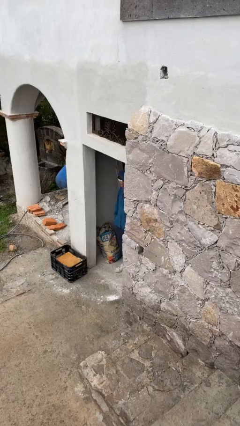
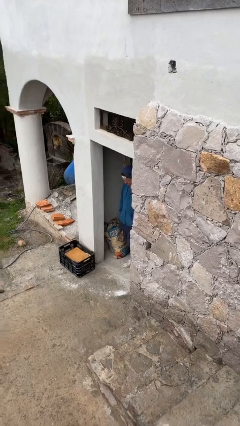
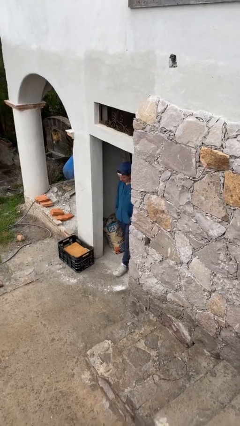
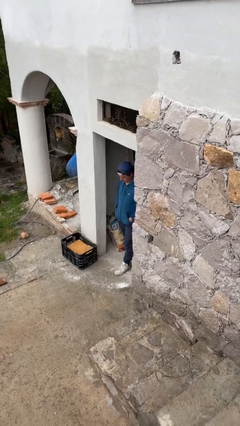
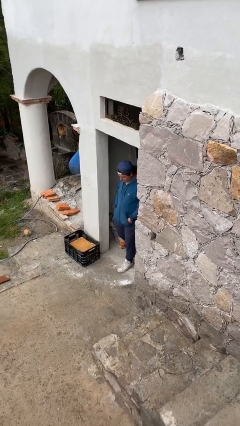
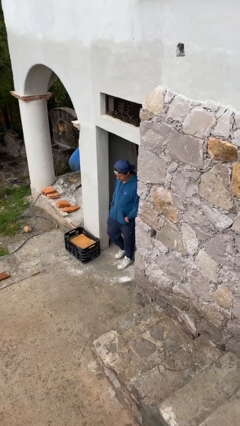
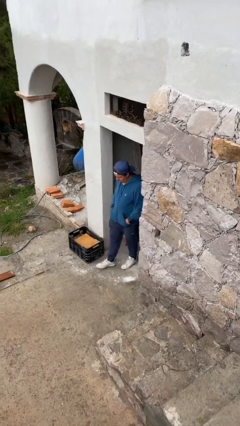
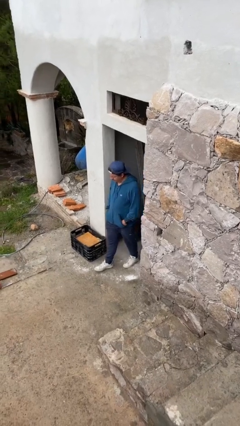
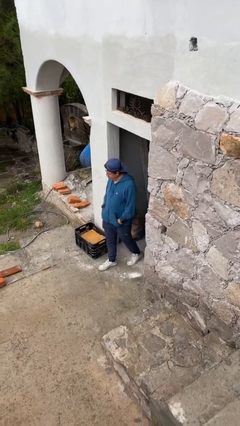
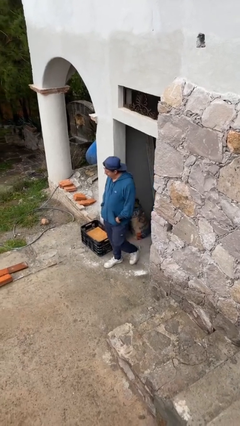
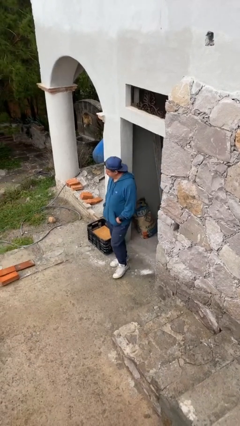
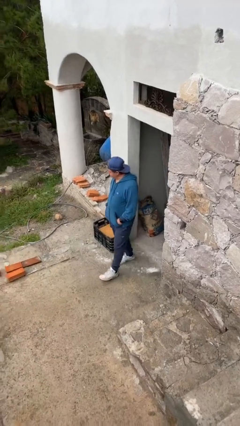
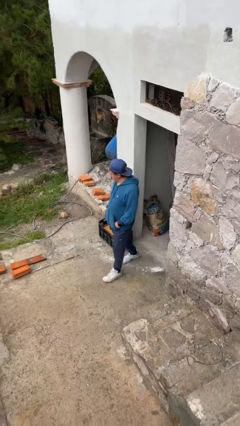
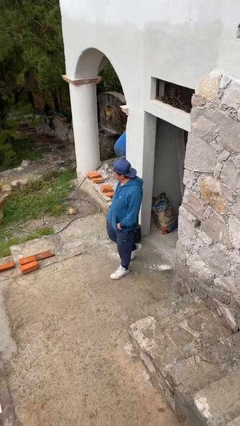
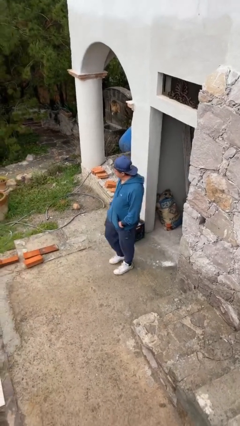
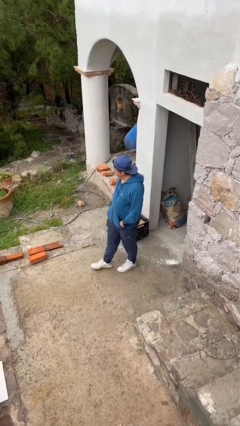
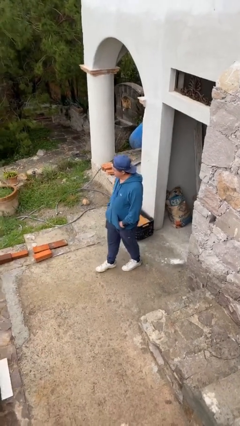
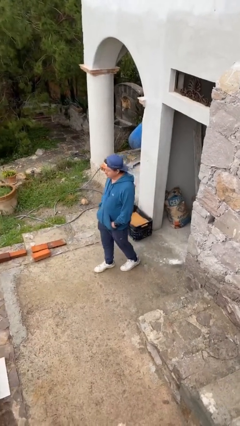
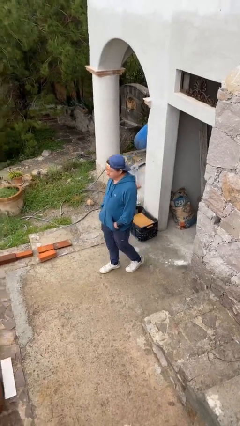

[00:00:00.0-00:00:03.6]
person enters scene through structure

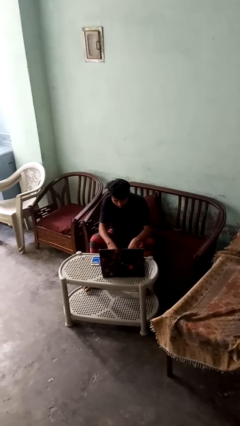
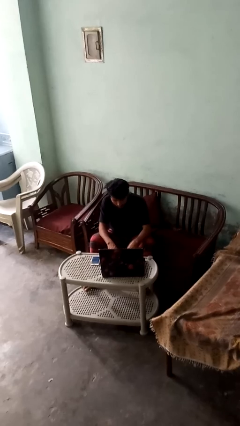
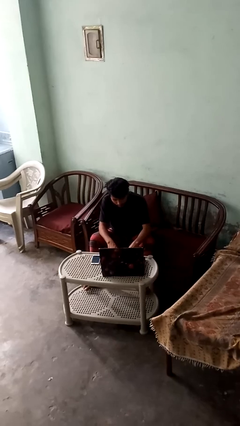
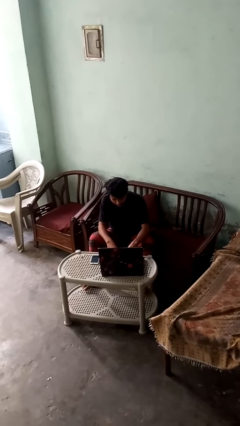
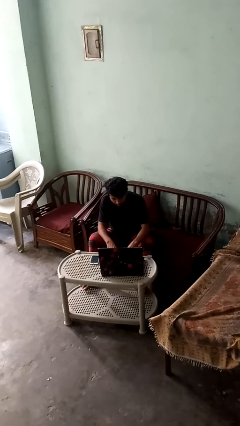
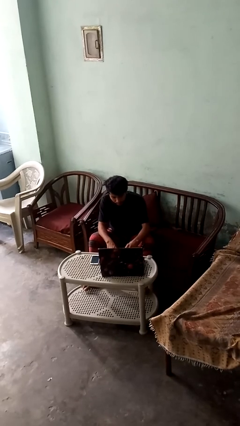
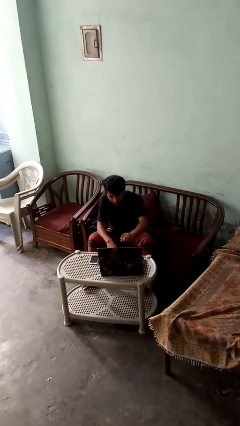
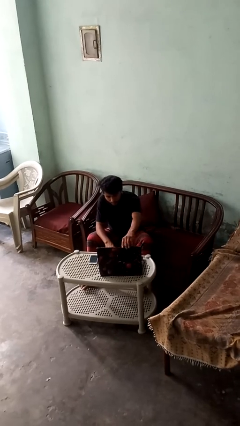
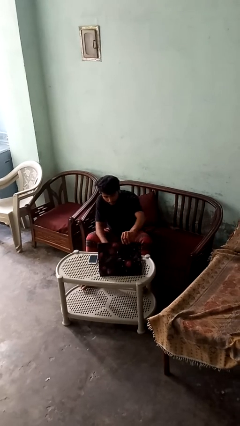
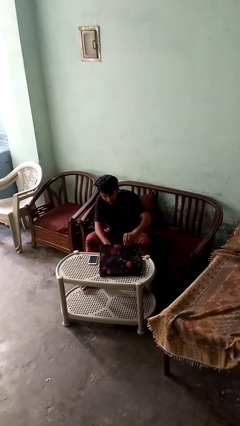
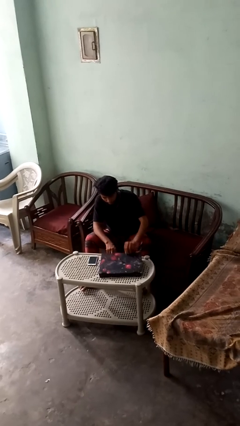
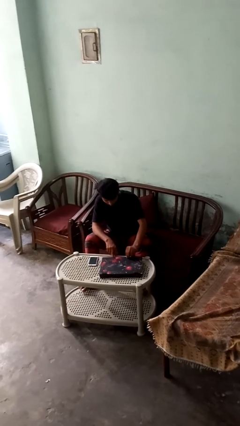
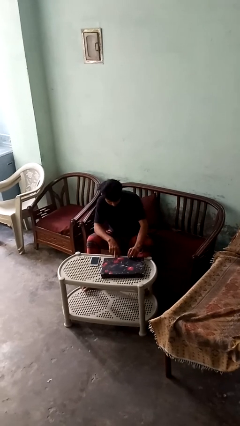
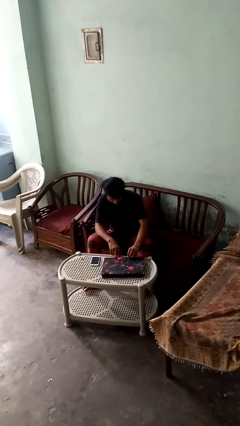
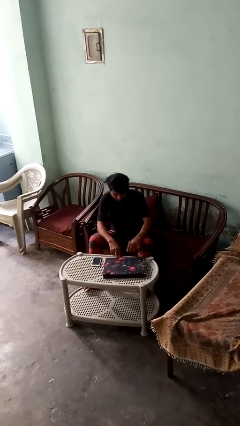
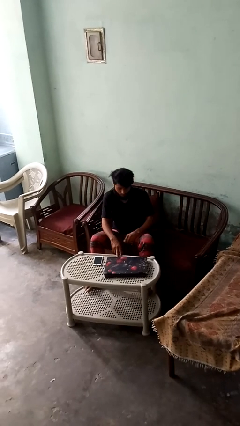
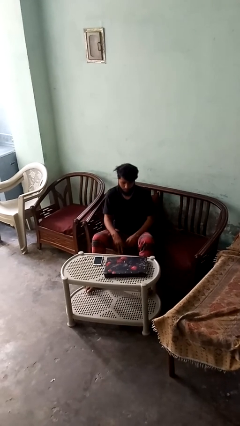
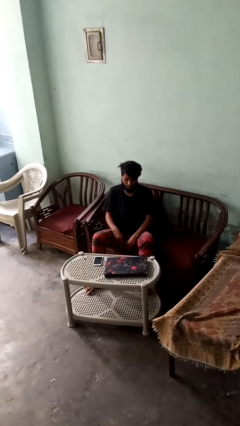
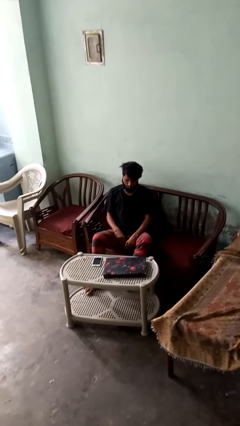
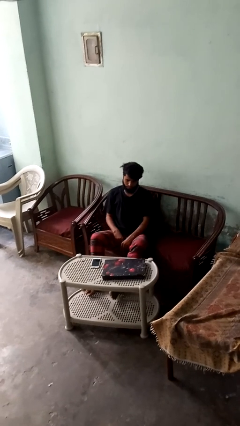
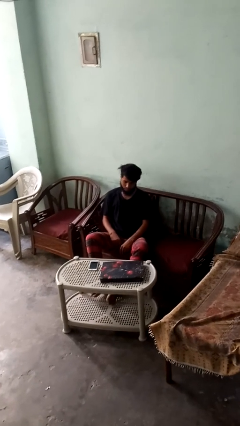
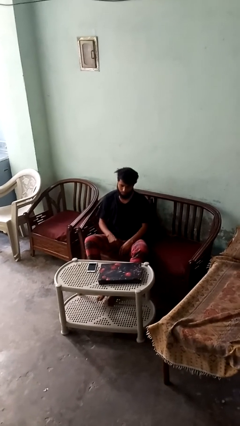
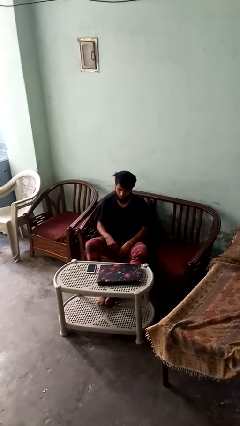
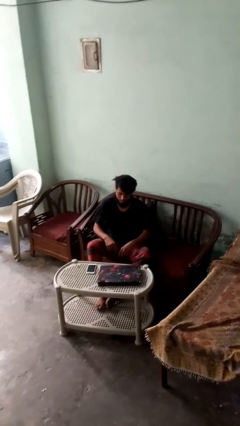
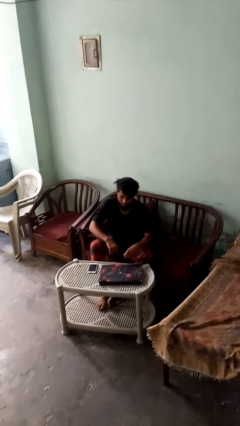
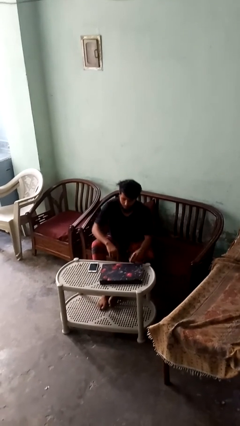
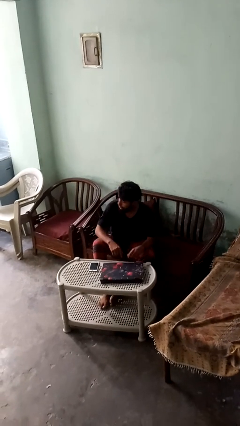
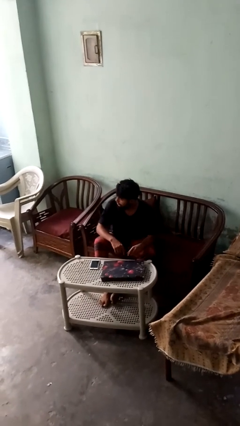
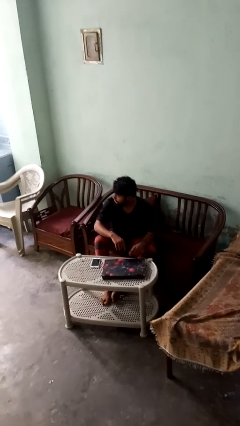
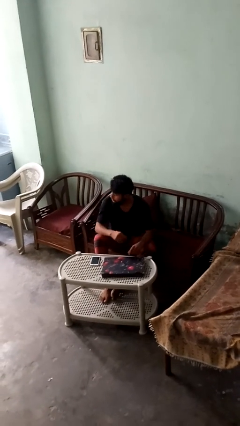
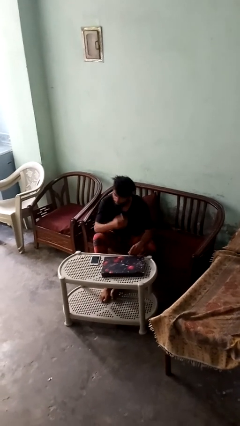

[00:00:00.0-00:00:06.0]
person closes laptop

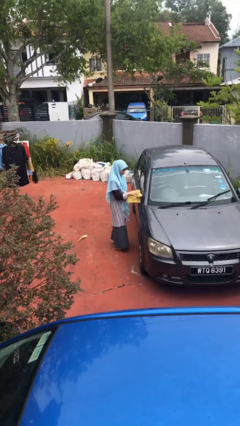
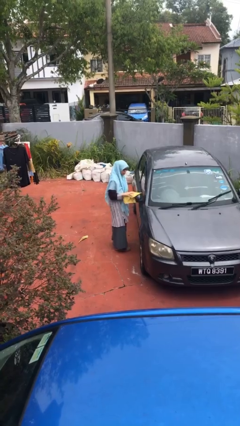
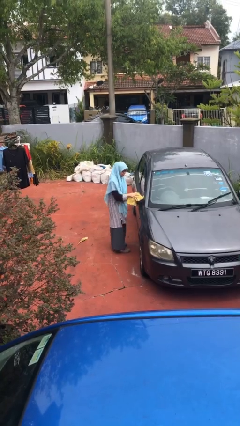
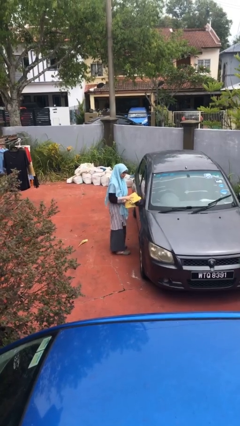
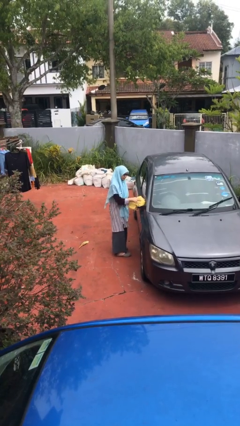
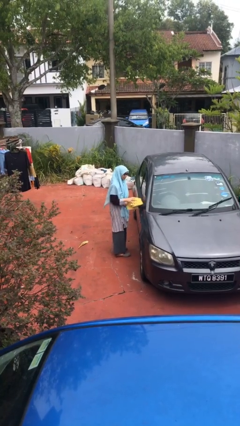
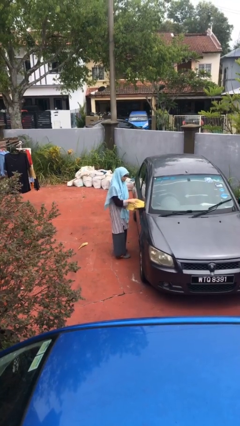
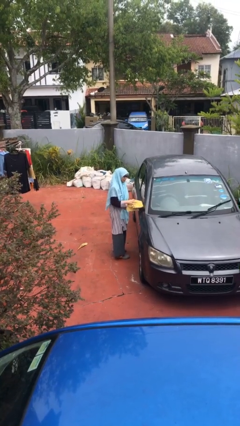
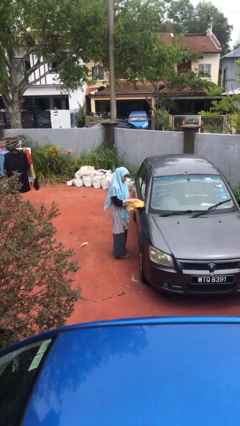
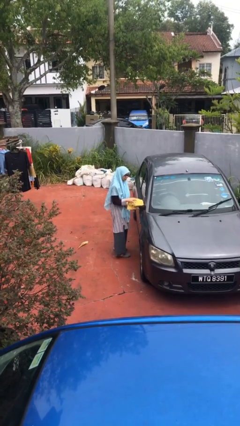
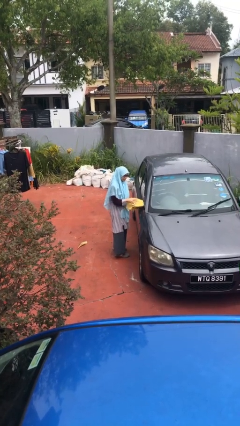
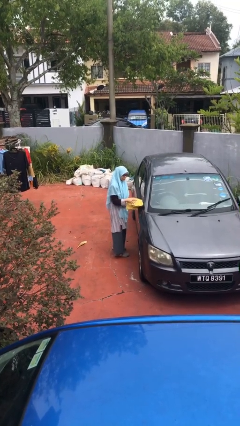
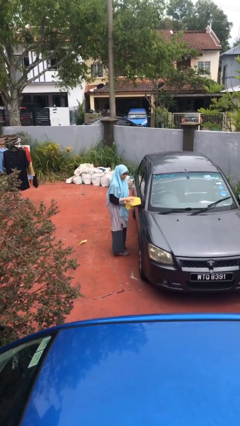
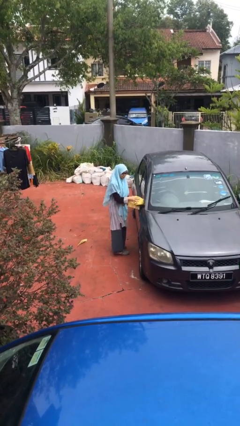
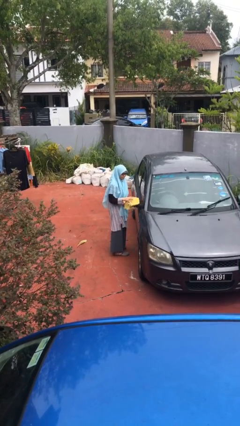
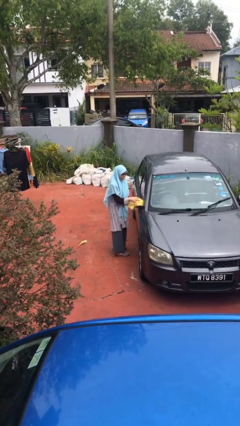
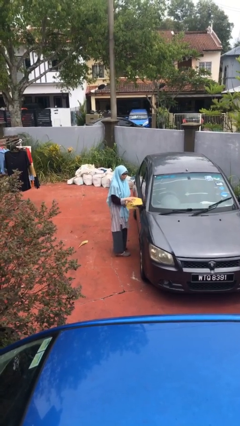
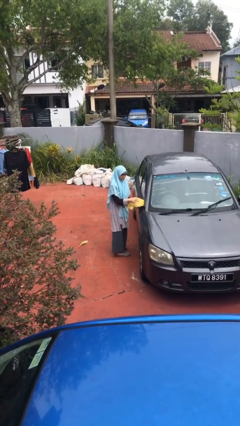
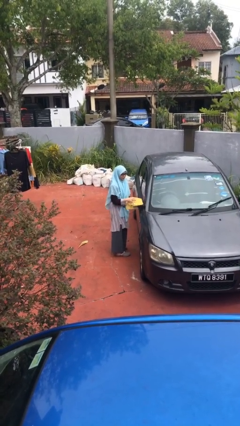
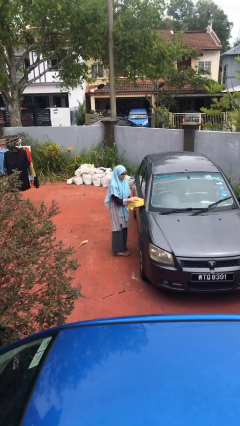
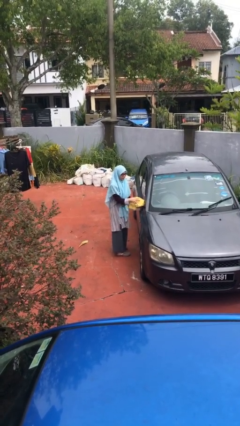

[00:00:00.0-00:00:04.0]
person polishes car with rag

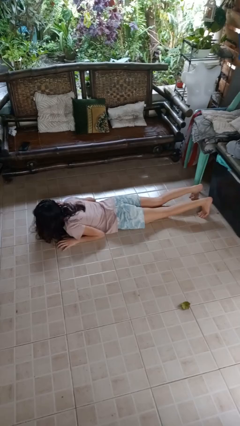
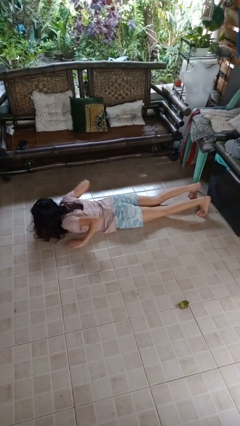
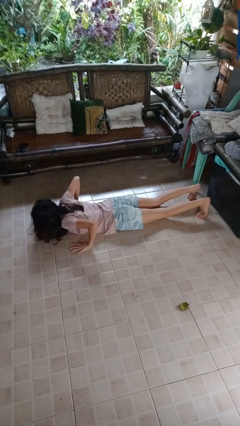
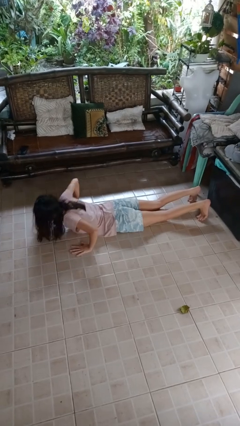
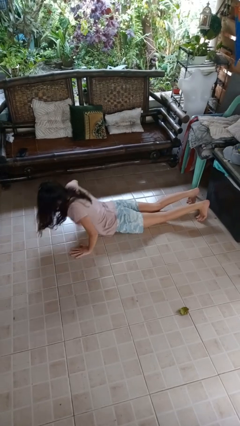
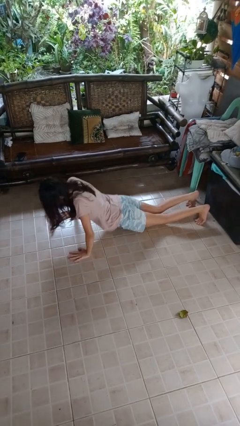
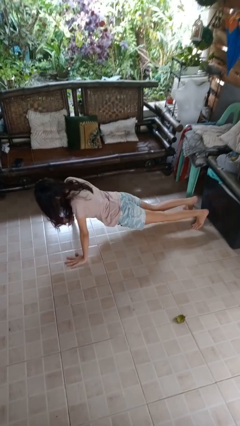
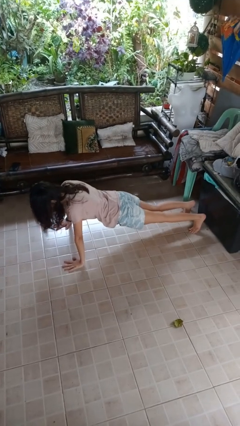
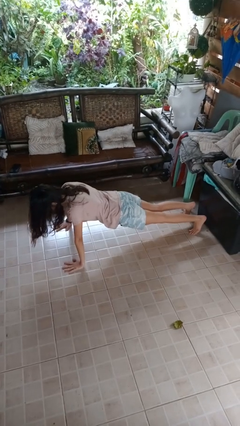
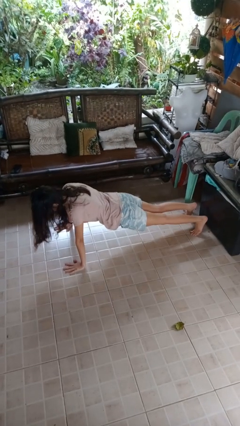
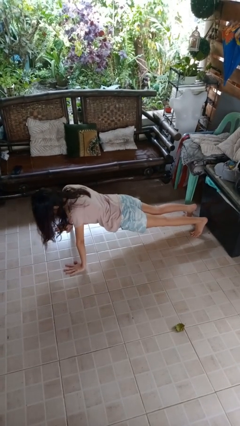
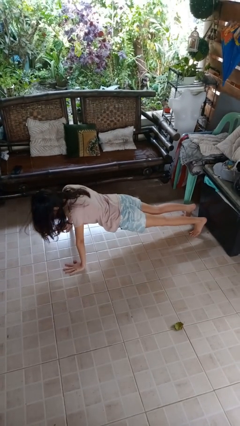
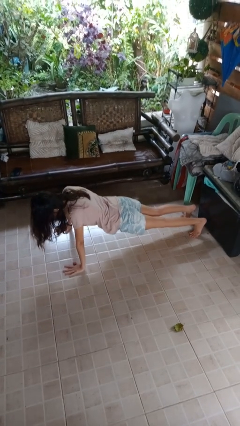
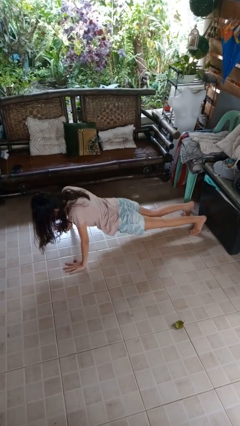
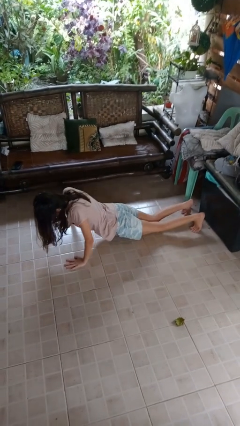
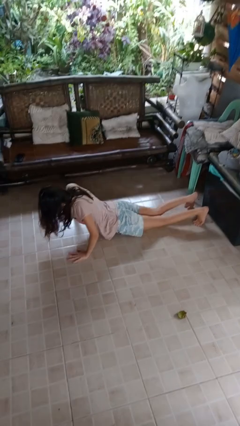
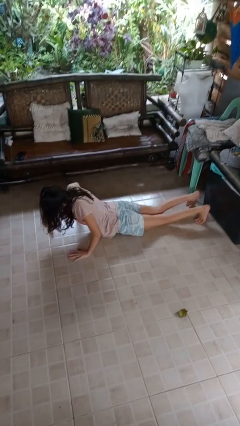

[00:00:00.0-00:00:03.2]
person exercises with pushup

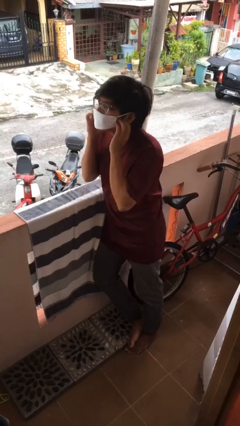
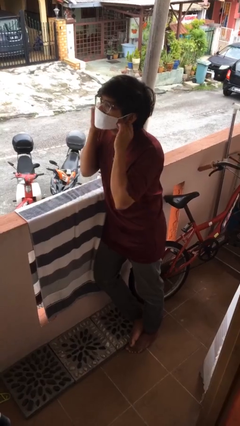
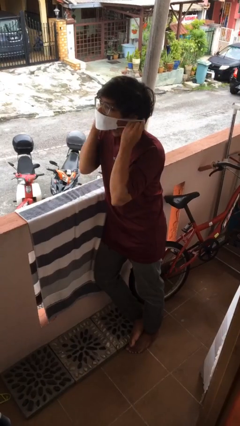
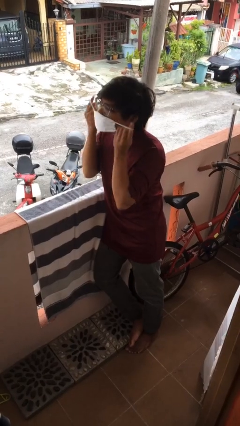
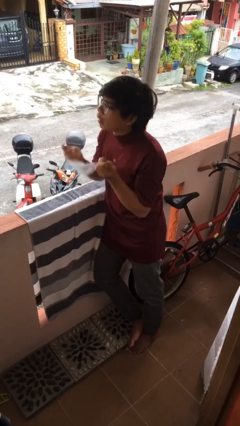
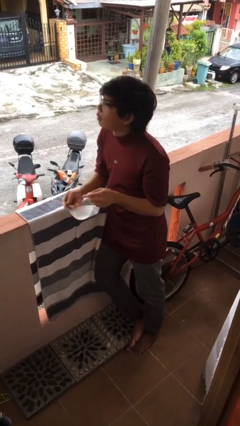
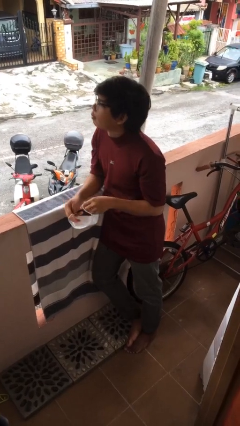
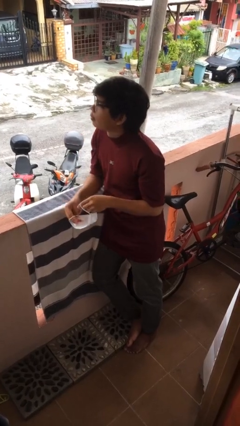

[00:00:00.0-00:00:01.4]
person takes off facemask
